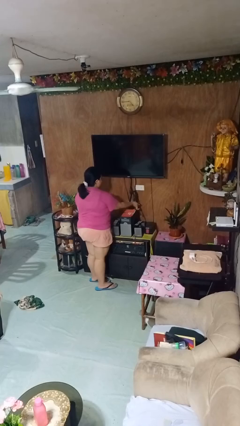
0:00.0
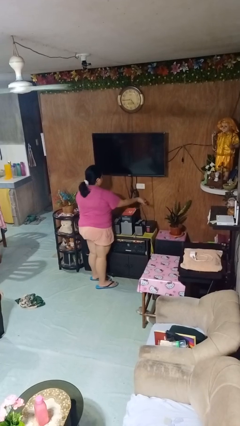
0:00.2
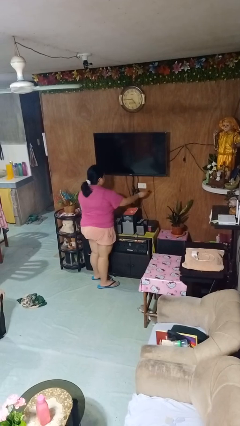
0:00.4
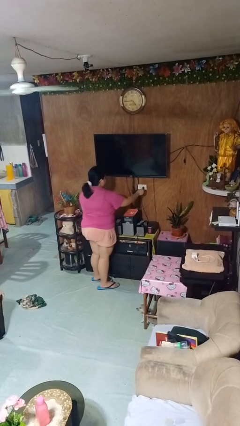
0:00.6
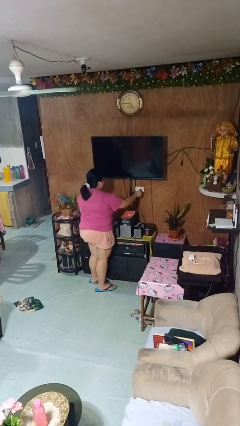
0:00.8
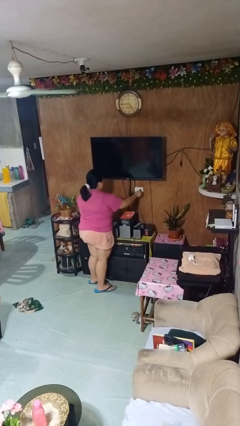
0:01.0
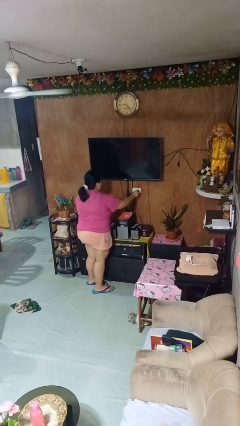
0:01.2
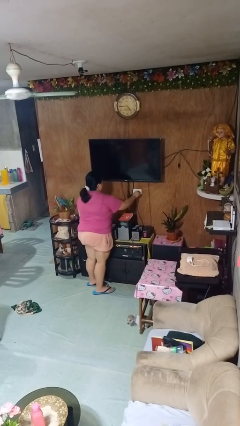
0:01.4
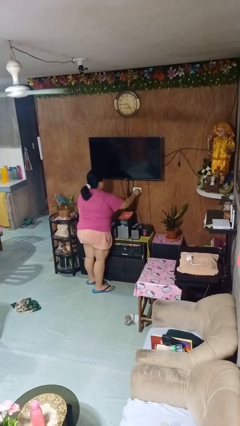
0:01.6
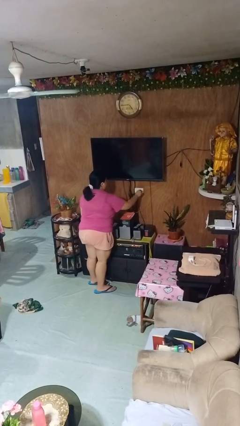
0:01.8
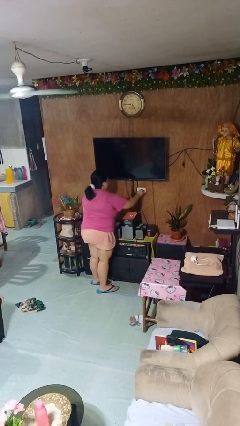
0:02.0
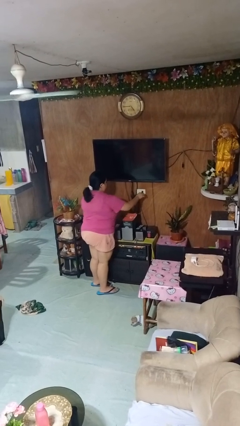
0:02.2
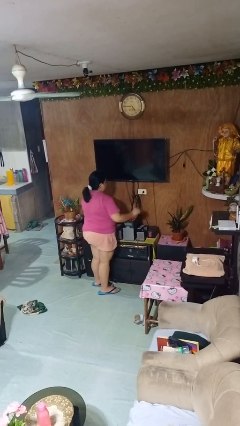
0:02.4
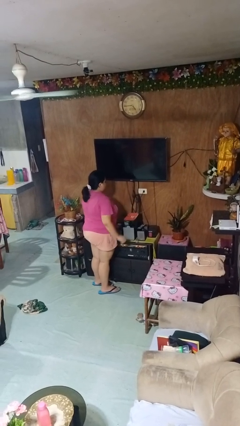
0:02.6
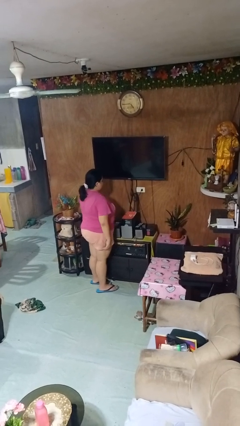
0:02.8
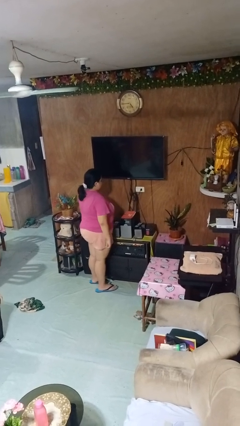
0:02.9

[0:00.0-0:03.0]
person plugs into electrical socket

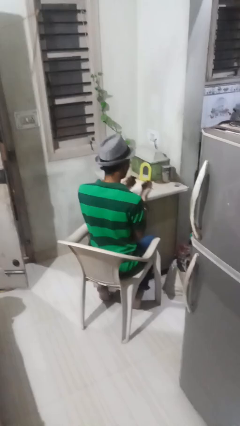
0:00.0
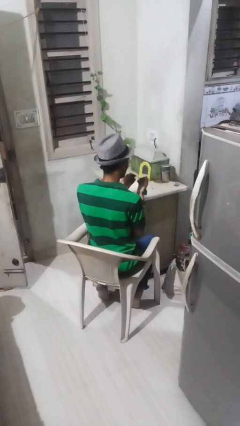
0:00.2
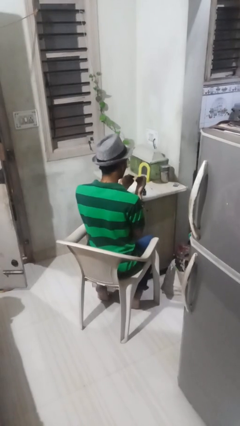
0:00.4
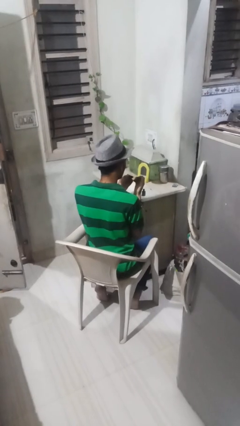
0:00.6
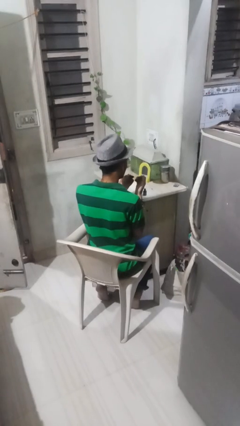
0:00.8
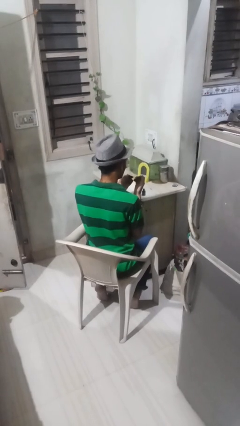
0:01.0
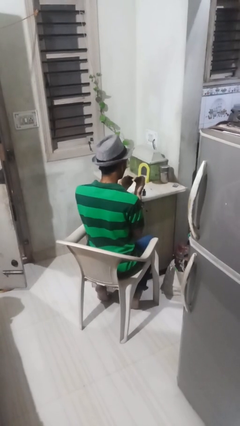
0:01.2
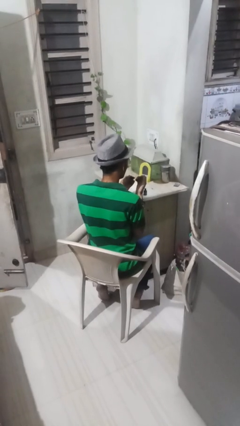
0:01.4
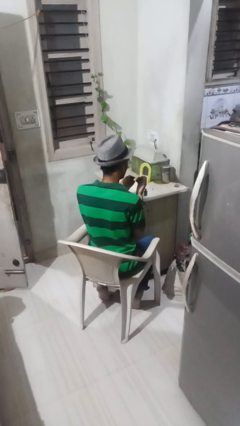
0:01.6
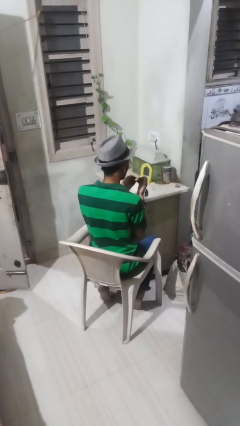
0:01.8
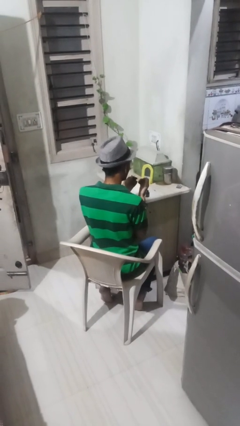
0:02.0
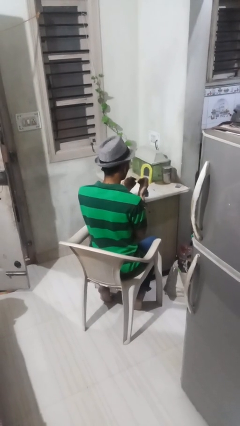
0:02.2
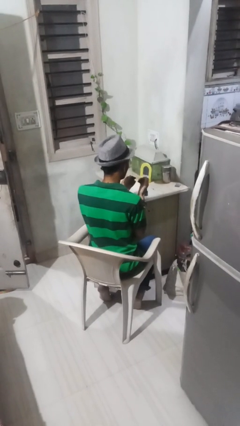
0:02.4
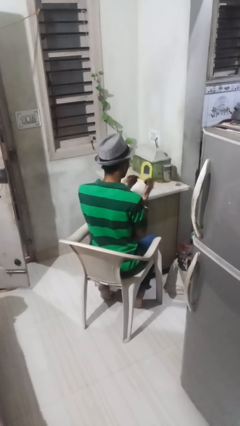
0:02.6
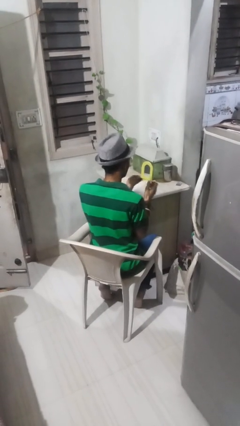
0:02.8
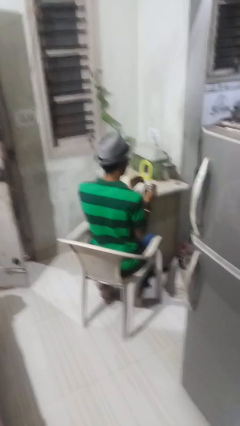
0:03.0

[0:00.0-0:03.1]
person paints fingernails

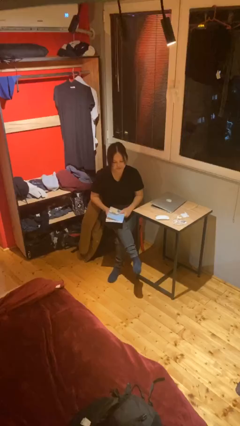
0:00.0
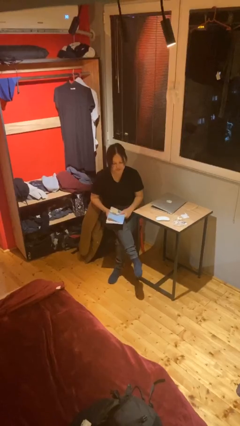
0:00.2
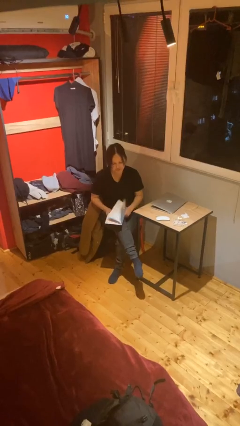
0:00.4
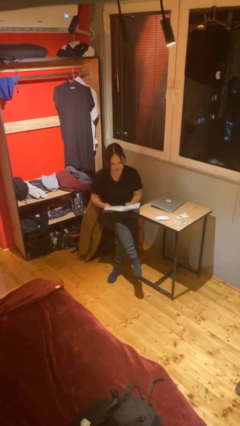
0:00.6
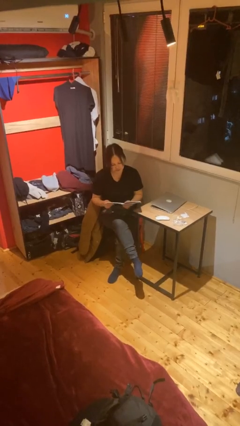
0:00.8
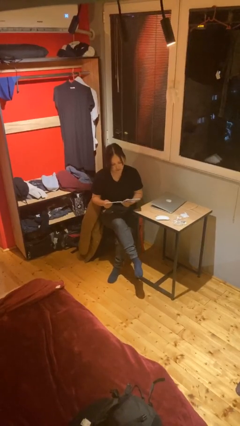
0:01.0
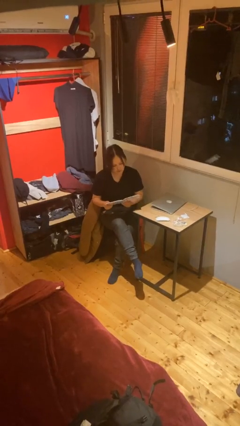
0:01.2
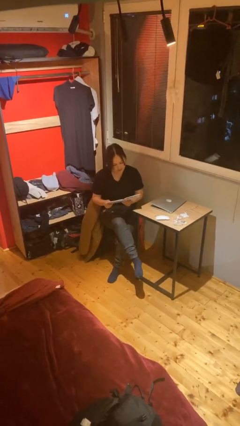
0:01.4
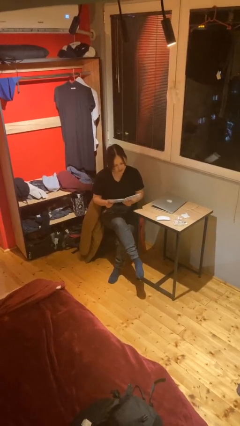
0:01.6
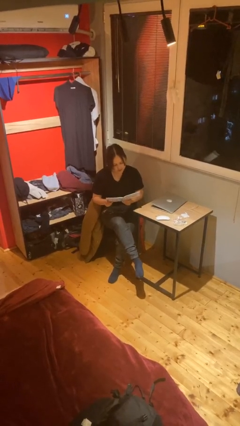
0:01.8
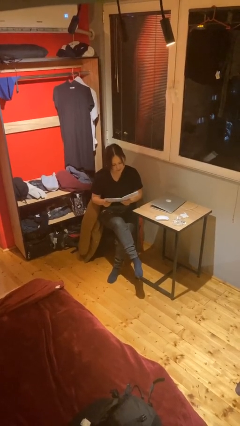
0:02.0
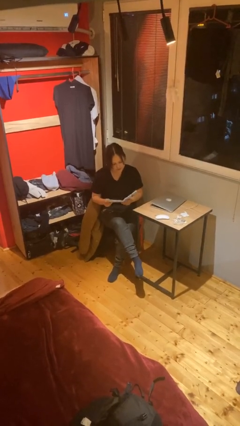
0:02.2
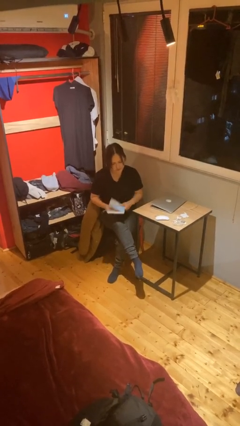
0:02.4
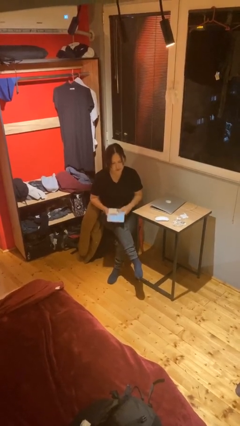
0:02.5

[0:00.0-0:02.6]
person reads document

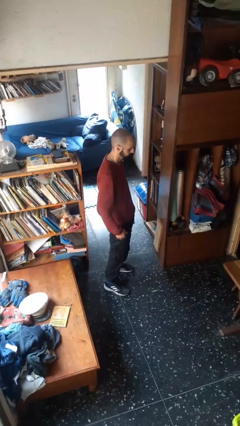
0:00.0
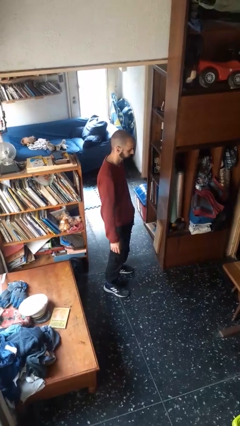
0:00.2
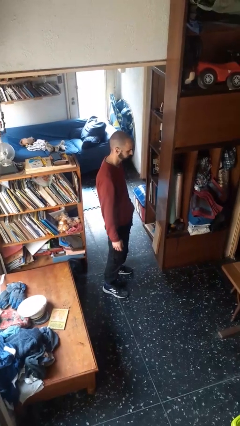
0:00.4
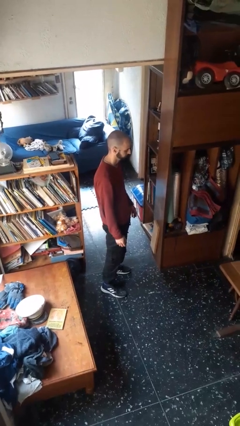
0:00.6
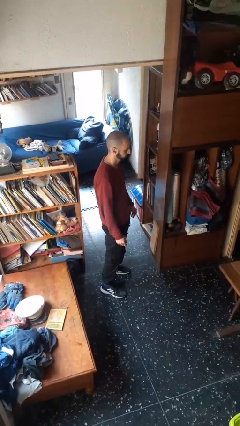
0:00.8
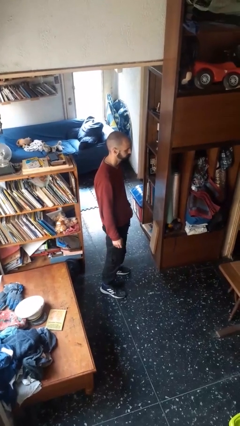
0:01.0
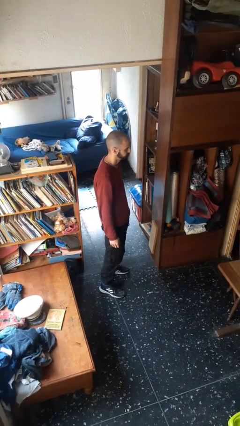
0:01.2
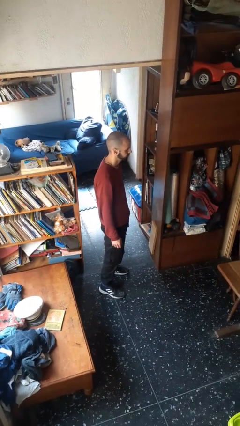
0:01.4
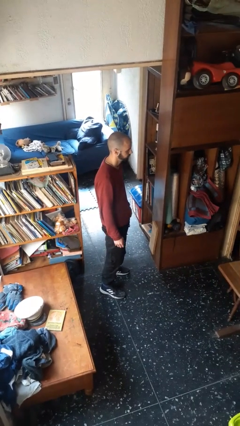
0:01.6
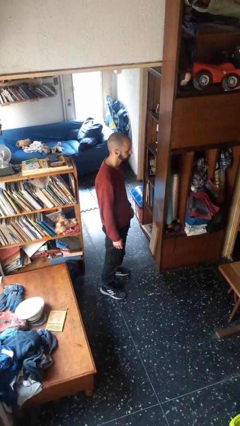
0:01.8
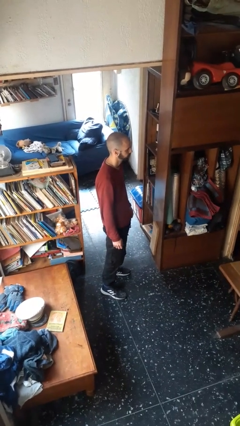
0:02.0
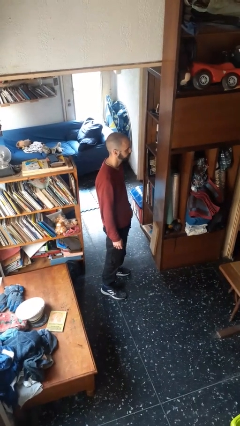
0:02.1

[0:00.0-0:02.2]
person puts hands in back pockets

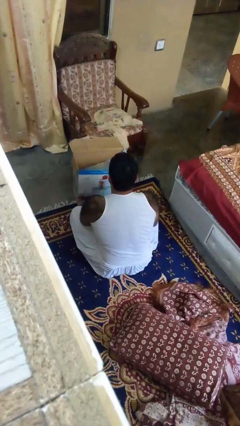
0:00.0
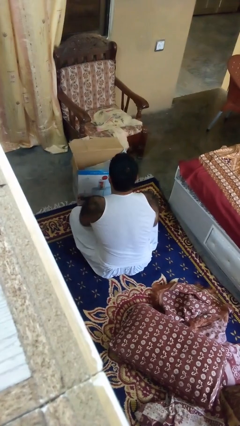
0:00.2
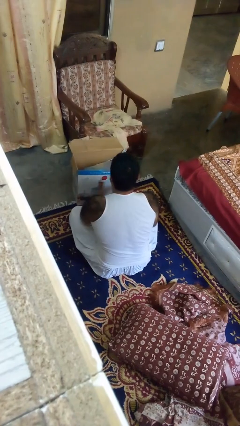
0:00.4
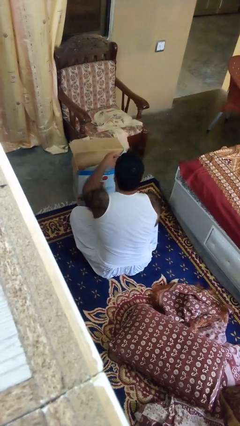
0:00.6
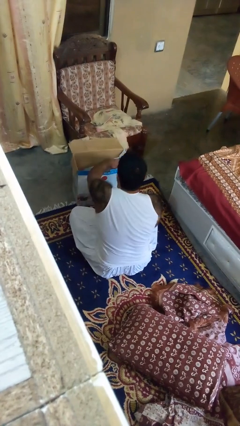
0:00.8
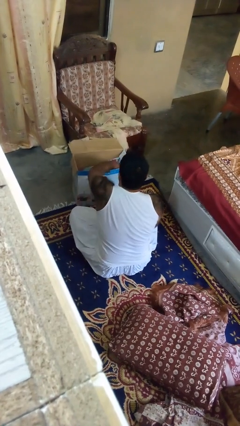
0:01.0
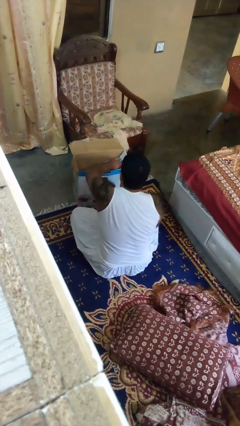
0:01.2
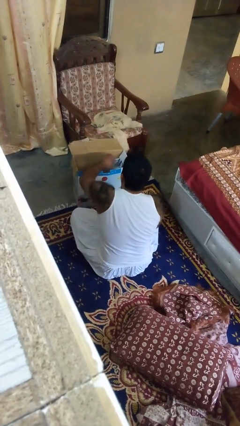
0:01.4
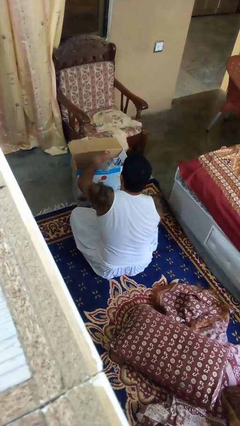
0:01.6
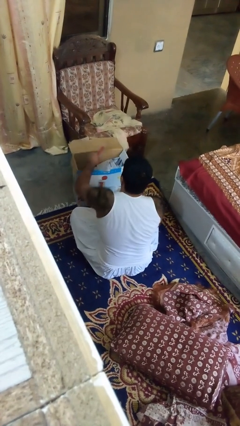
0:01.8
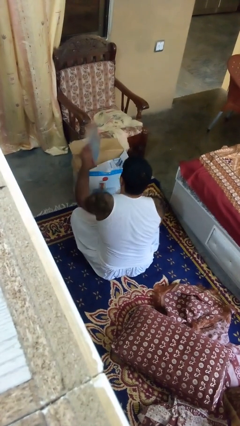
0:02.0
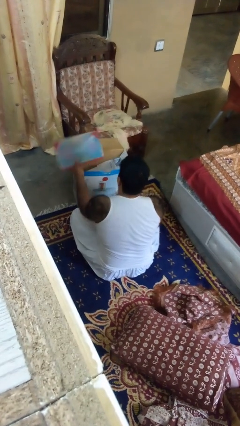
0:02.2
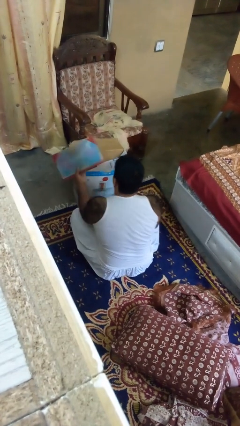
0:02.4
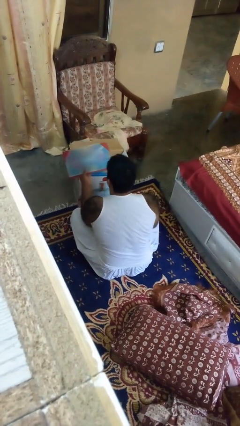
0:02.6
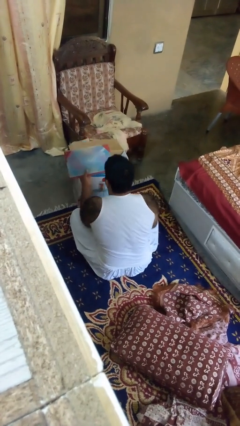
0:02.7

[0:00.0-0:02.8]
person takes object from box

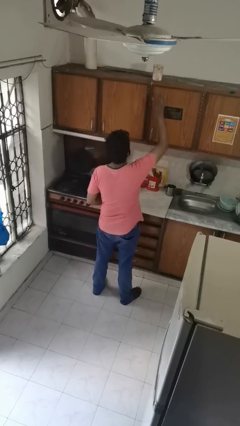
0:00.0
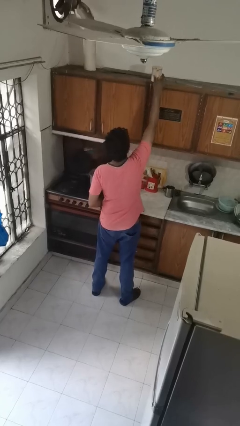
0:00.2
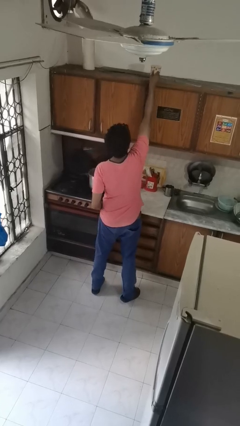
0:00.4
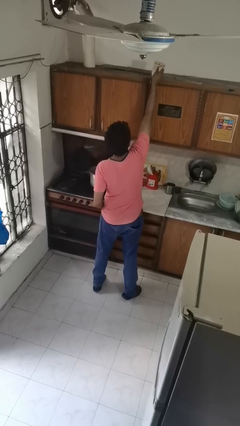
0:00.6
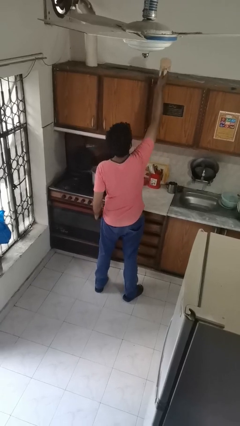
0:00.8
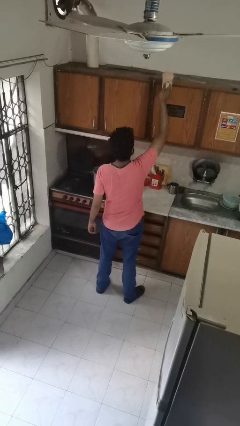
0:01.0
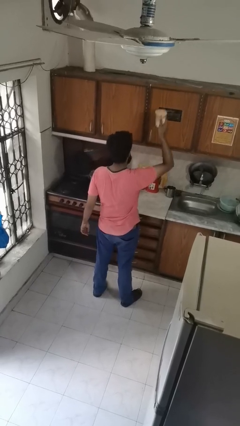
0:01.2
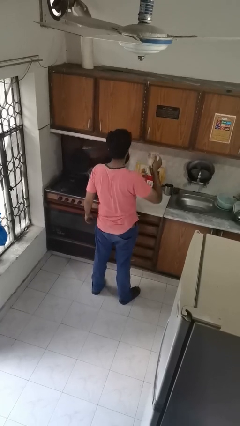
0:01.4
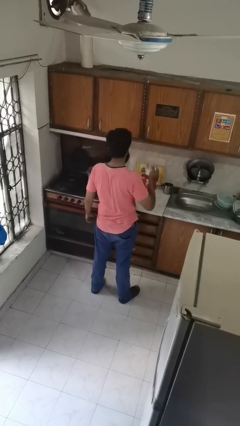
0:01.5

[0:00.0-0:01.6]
person picks up object from shelf

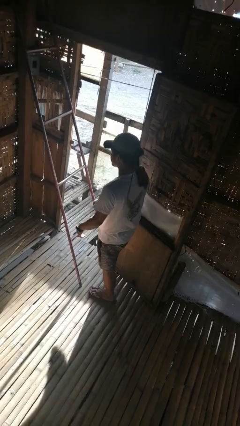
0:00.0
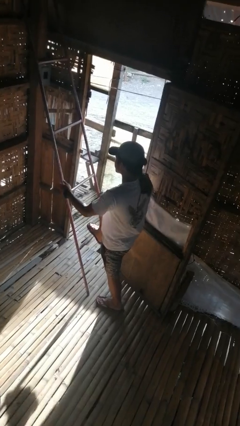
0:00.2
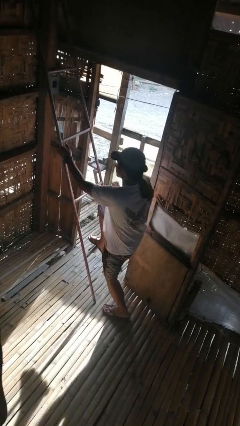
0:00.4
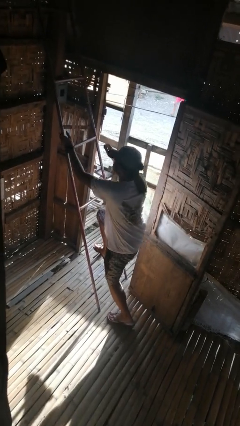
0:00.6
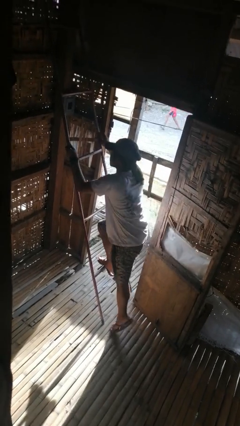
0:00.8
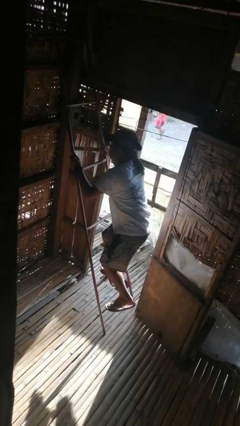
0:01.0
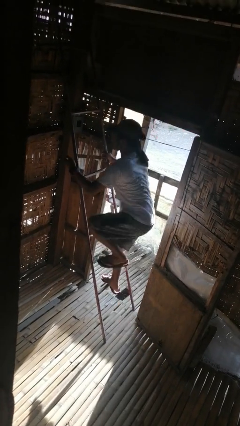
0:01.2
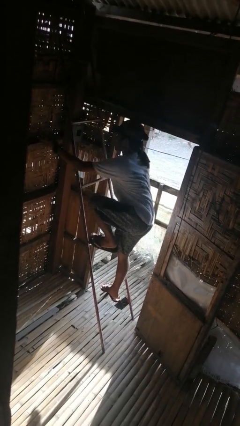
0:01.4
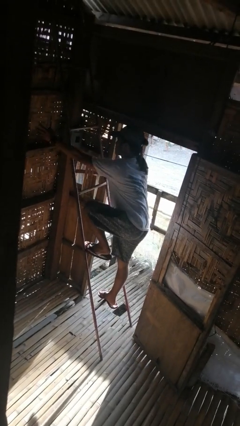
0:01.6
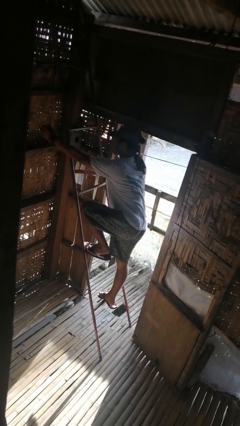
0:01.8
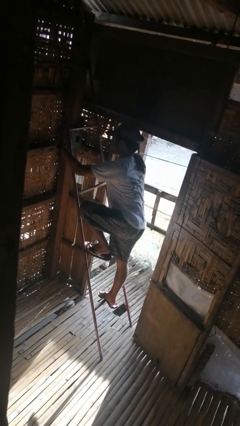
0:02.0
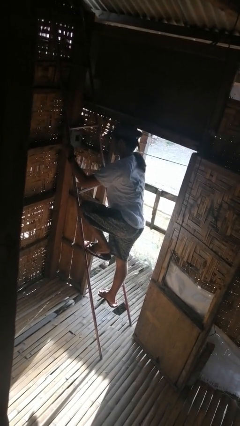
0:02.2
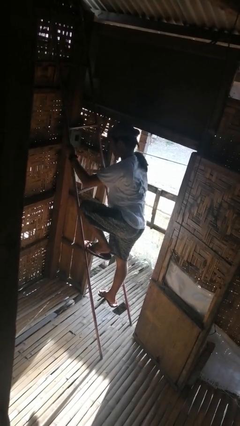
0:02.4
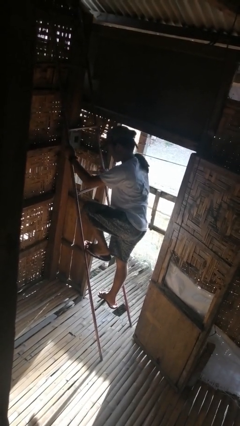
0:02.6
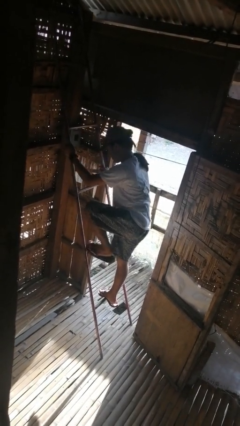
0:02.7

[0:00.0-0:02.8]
person climbs up ladder
